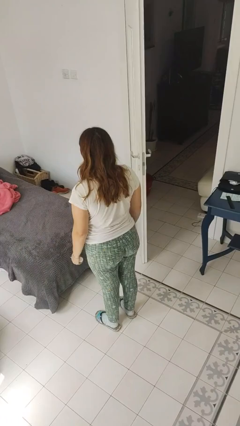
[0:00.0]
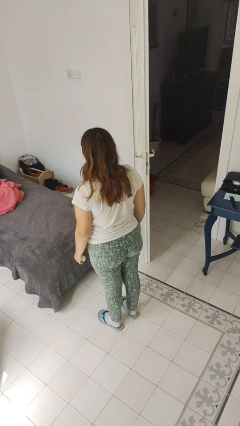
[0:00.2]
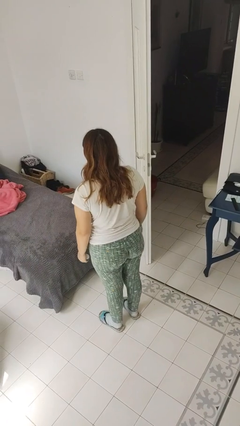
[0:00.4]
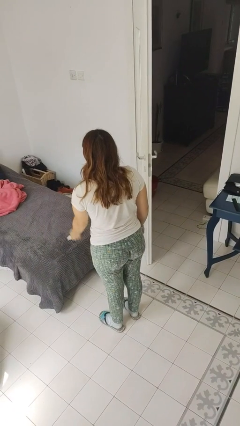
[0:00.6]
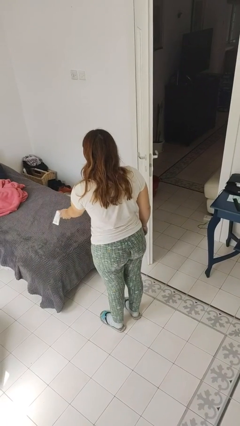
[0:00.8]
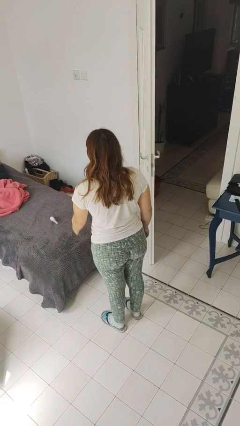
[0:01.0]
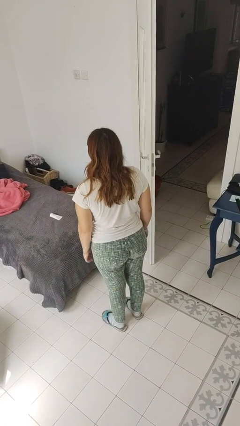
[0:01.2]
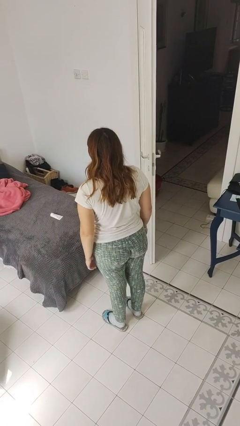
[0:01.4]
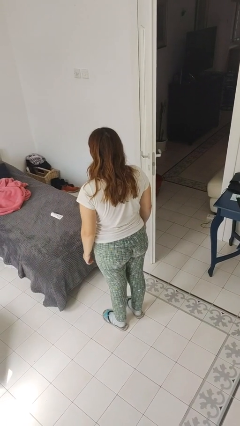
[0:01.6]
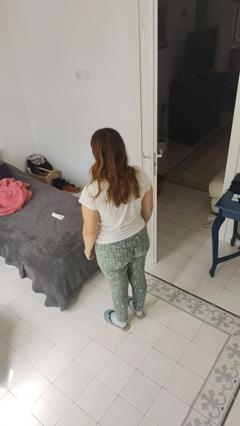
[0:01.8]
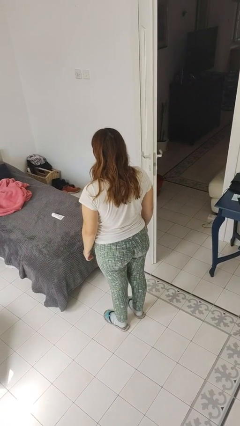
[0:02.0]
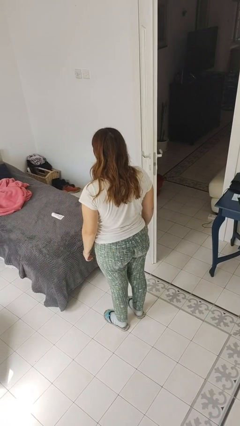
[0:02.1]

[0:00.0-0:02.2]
person throws object on bed

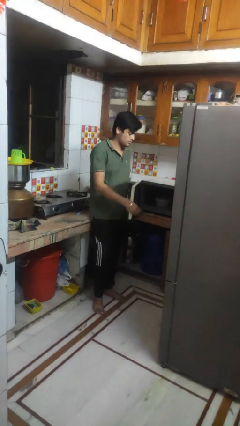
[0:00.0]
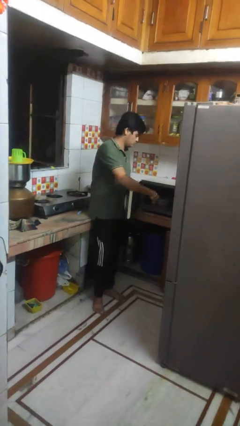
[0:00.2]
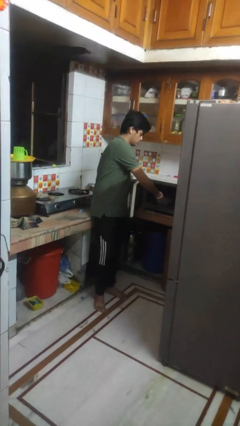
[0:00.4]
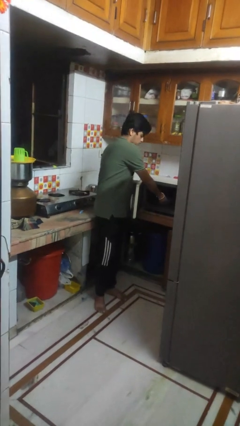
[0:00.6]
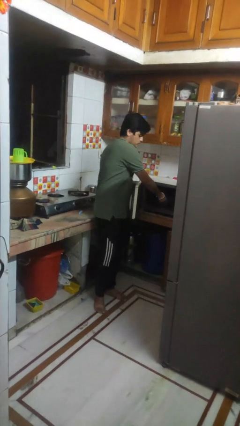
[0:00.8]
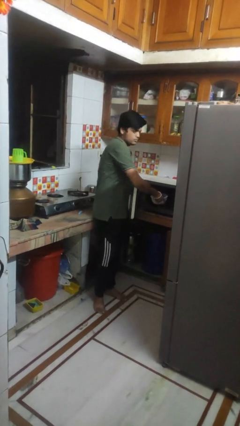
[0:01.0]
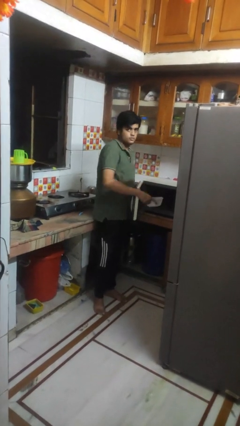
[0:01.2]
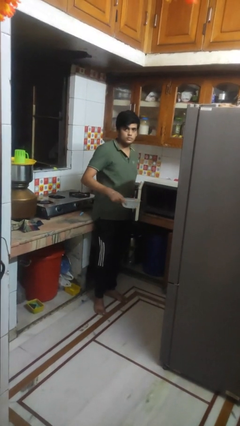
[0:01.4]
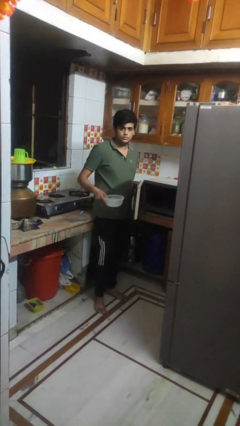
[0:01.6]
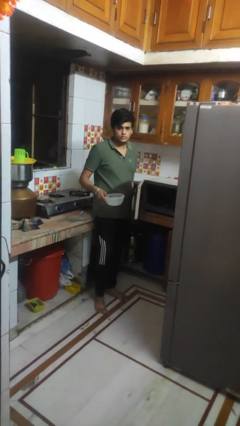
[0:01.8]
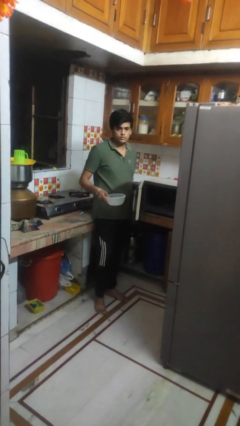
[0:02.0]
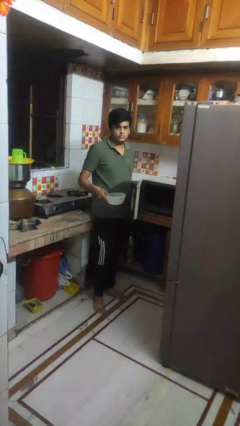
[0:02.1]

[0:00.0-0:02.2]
person takes object from microwave

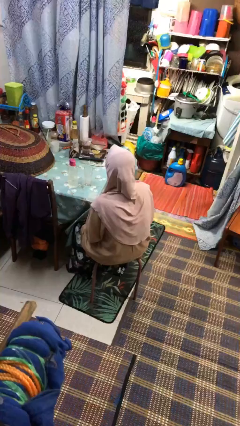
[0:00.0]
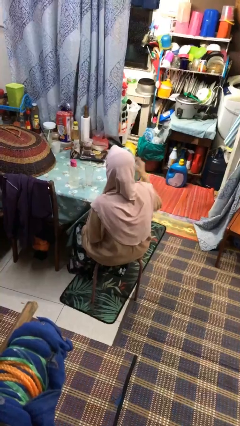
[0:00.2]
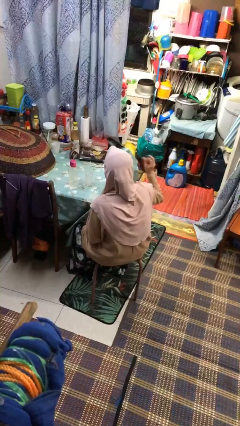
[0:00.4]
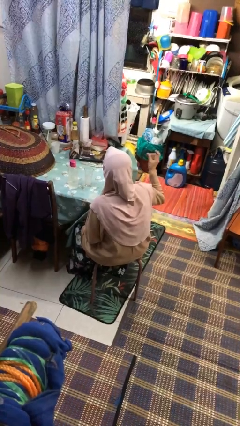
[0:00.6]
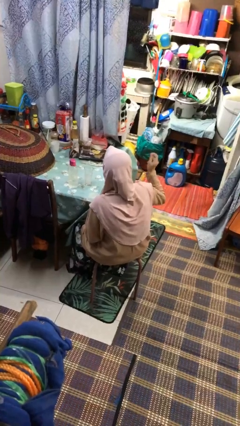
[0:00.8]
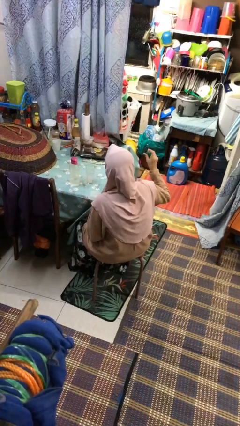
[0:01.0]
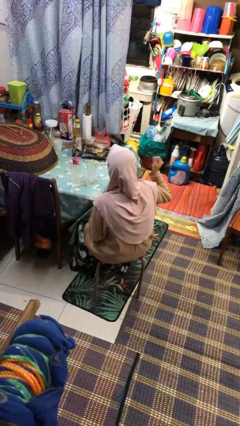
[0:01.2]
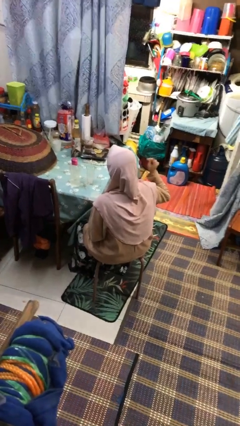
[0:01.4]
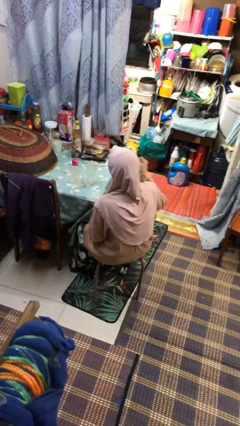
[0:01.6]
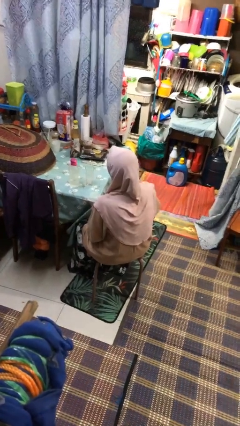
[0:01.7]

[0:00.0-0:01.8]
person snaps fingers

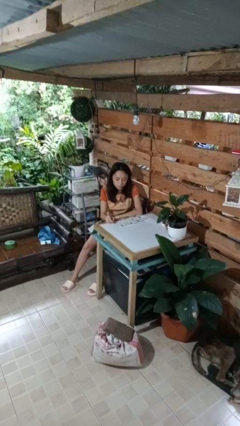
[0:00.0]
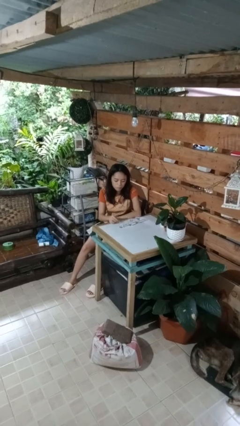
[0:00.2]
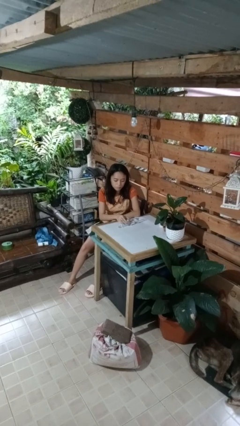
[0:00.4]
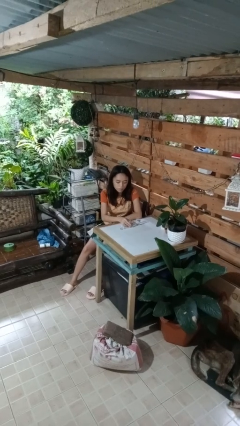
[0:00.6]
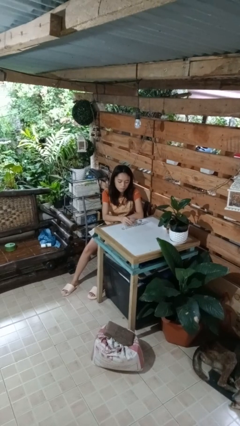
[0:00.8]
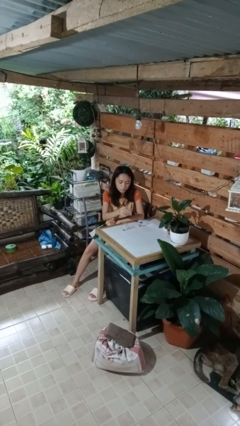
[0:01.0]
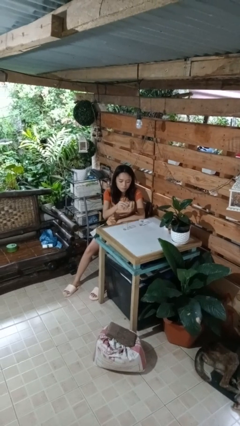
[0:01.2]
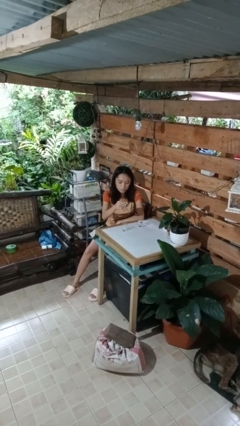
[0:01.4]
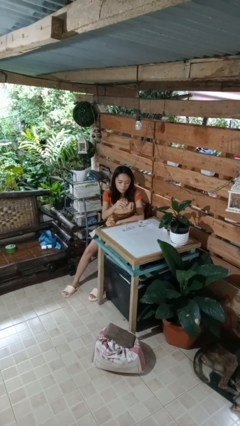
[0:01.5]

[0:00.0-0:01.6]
person picks up object from table

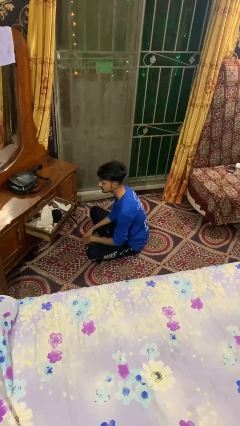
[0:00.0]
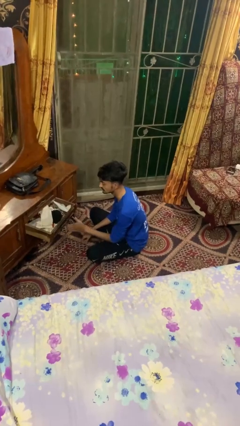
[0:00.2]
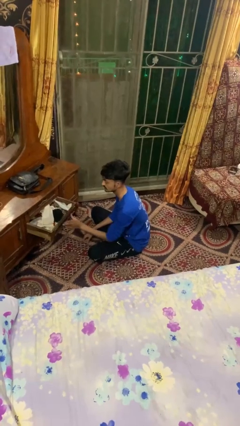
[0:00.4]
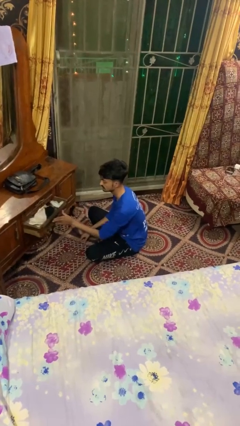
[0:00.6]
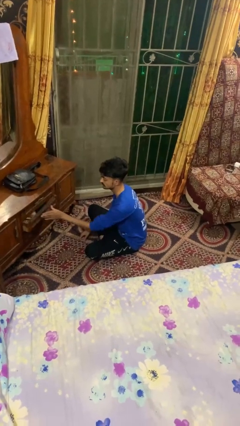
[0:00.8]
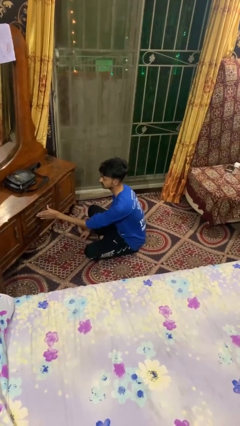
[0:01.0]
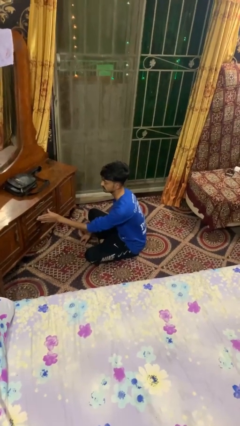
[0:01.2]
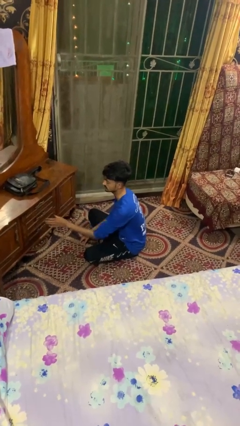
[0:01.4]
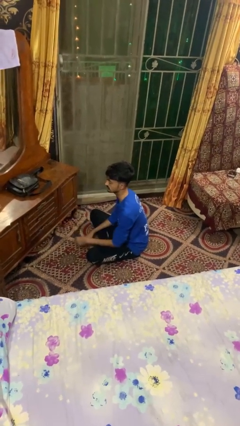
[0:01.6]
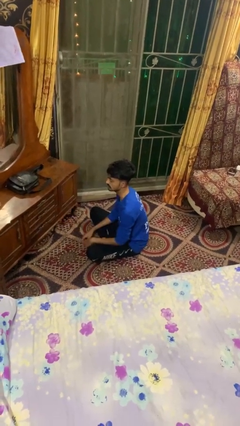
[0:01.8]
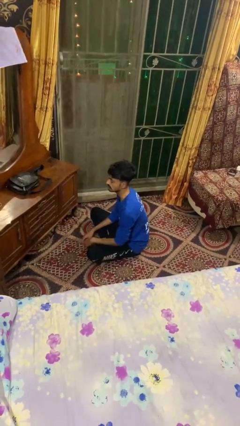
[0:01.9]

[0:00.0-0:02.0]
person closes dresser drawer

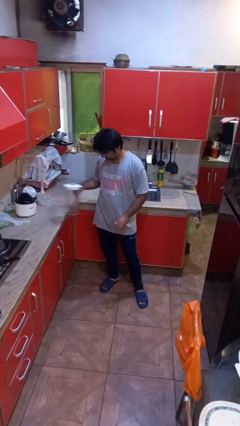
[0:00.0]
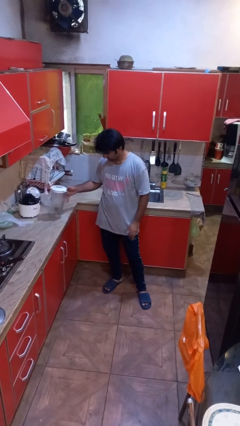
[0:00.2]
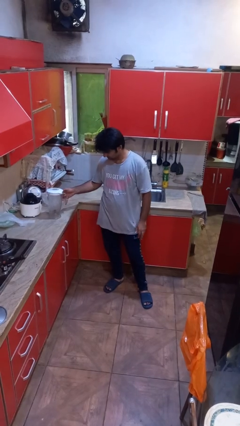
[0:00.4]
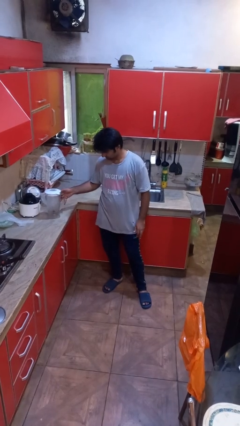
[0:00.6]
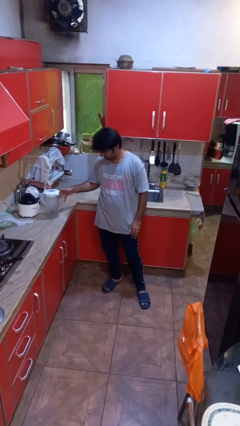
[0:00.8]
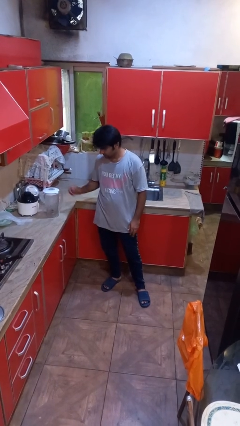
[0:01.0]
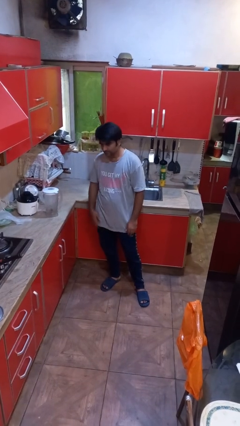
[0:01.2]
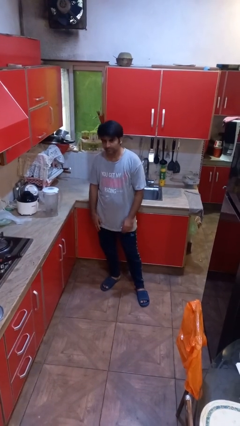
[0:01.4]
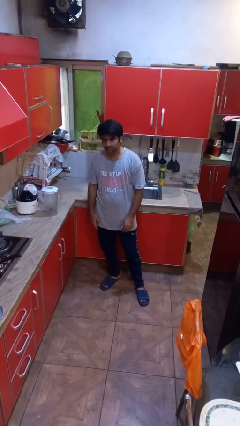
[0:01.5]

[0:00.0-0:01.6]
person puts down object on countertop

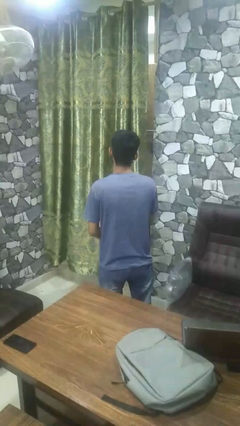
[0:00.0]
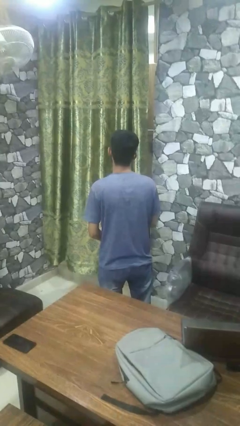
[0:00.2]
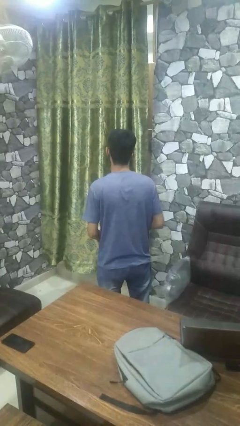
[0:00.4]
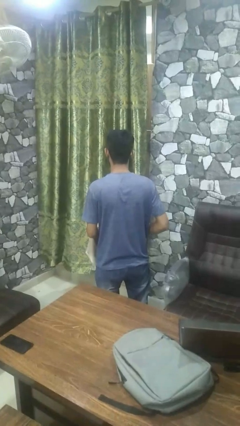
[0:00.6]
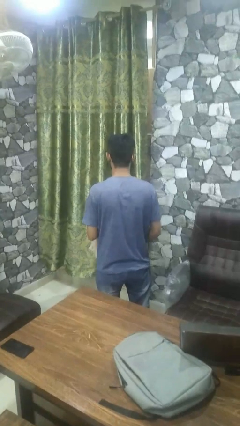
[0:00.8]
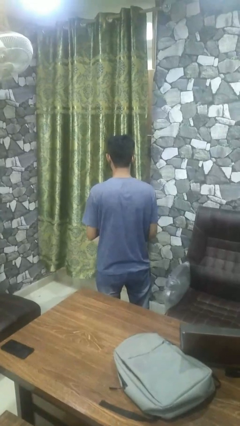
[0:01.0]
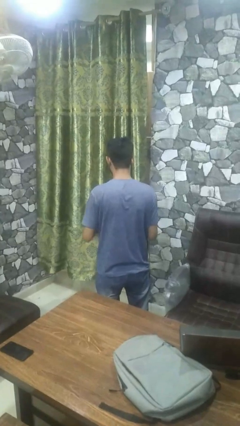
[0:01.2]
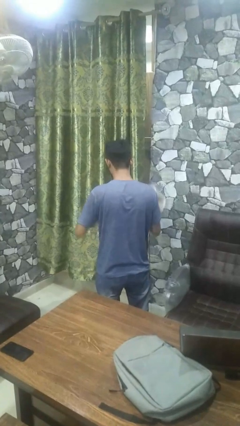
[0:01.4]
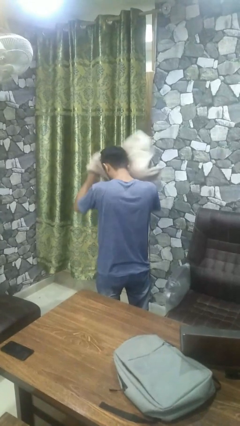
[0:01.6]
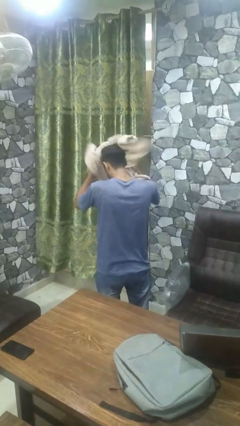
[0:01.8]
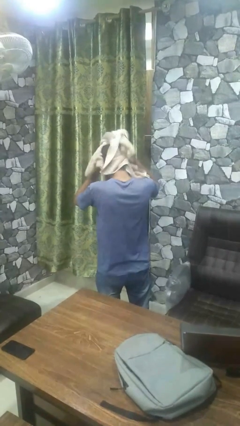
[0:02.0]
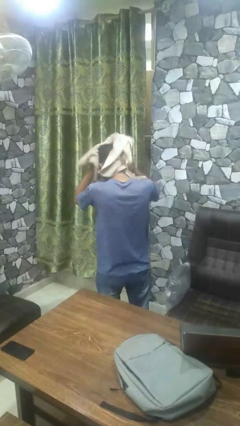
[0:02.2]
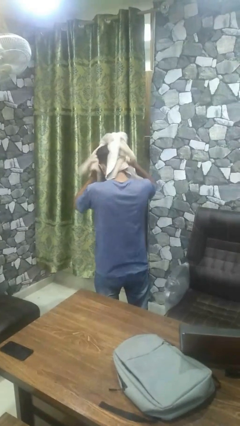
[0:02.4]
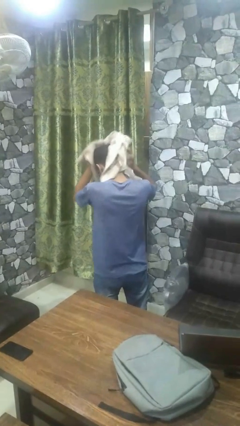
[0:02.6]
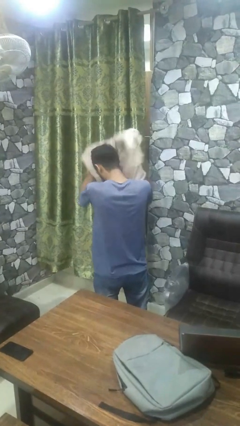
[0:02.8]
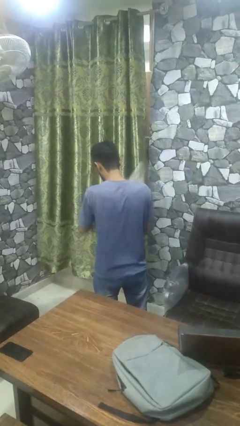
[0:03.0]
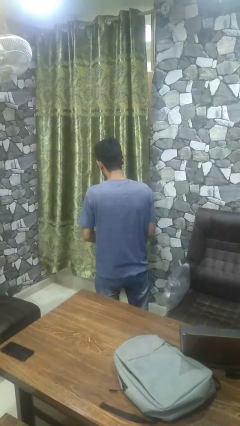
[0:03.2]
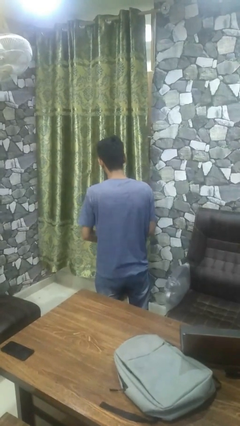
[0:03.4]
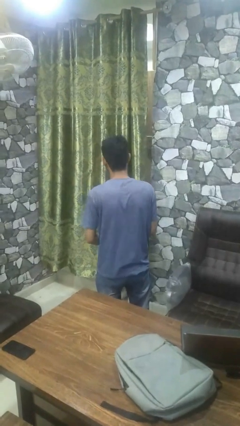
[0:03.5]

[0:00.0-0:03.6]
person dries hair with towel

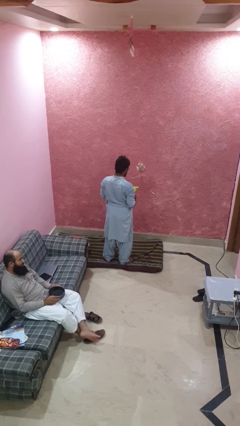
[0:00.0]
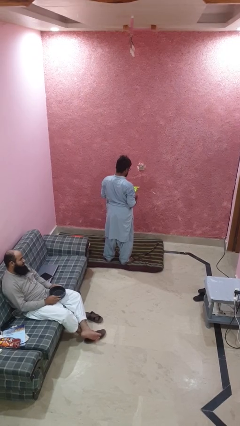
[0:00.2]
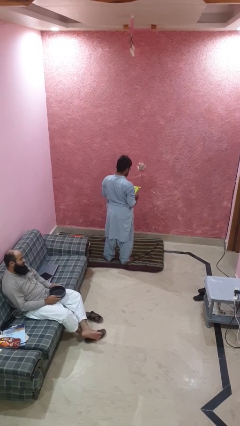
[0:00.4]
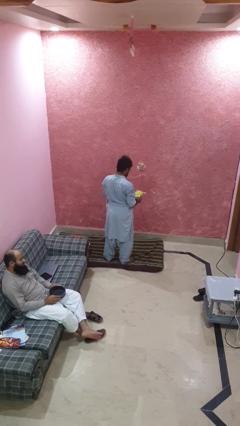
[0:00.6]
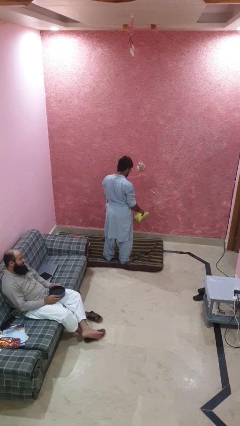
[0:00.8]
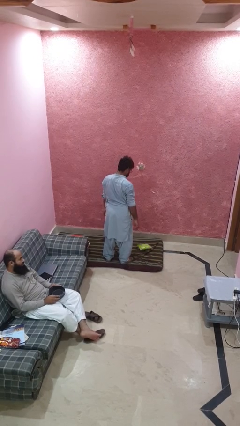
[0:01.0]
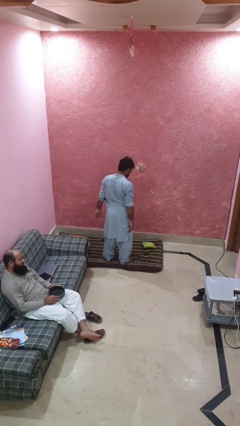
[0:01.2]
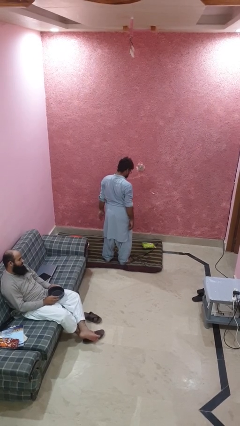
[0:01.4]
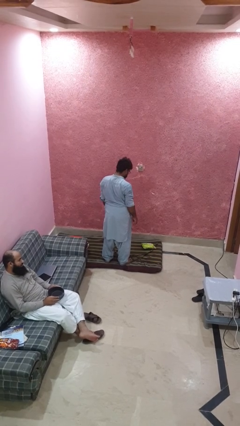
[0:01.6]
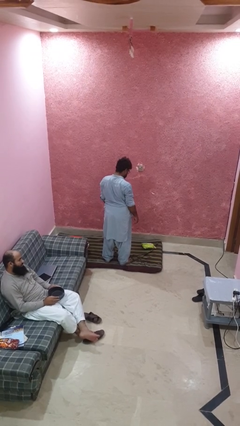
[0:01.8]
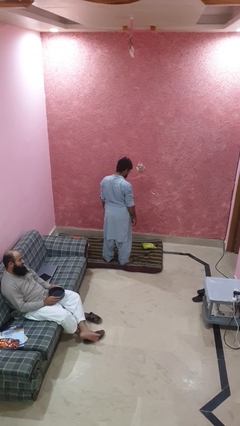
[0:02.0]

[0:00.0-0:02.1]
person drops object
